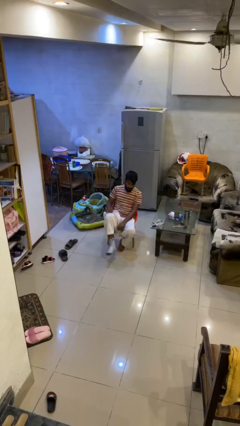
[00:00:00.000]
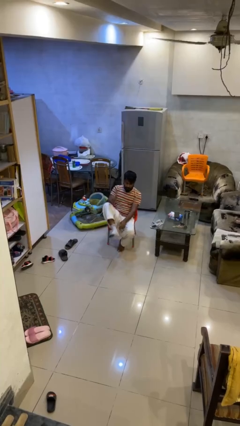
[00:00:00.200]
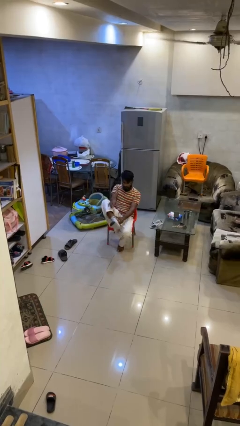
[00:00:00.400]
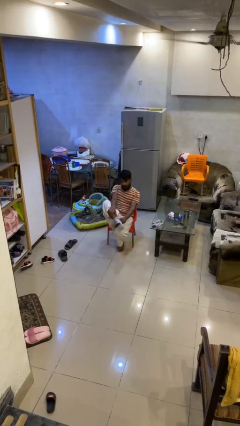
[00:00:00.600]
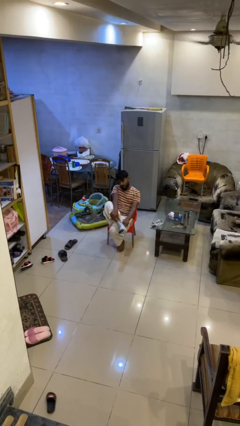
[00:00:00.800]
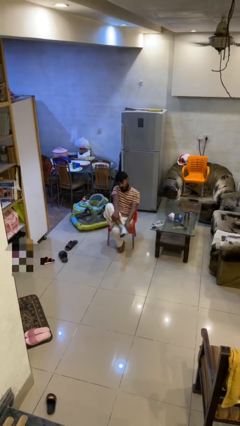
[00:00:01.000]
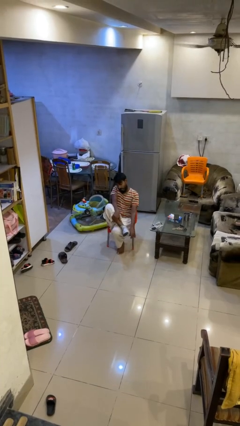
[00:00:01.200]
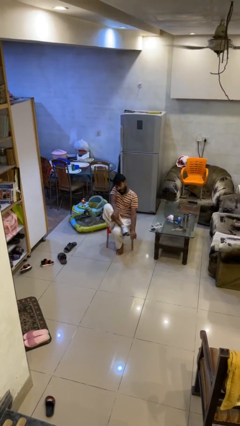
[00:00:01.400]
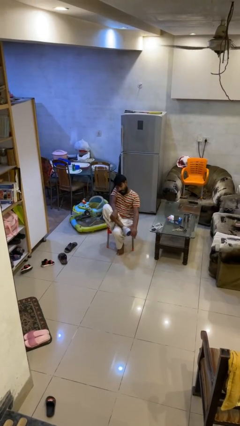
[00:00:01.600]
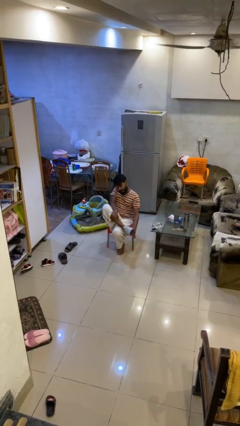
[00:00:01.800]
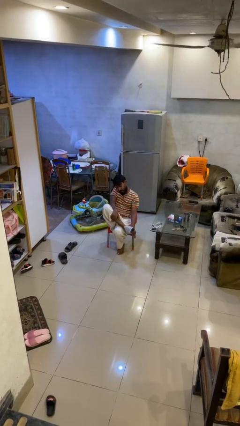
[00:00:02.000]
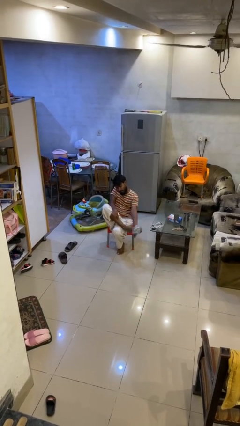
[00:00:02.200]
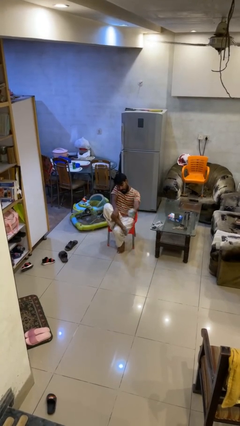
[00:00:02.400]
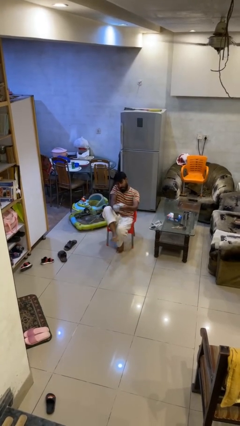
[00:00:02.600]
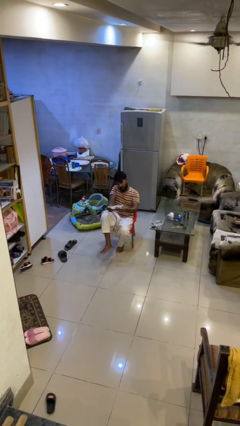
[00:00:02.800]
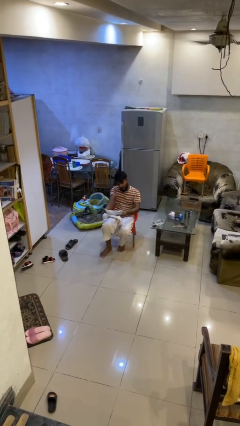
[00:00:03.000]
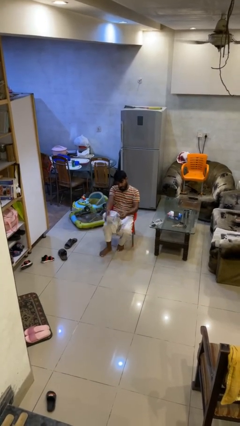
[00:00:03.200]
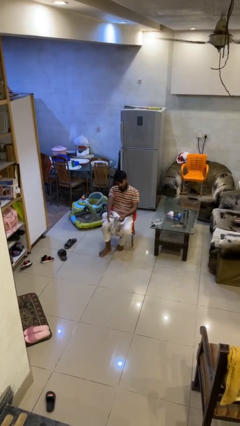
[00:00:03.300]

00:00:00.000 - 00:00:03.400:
person takes off socks

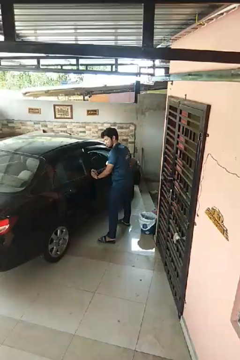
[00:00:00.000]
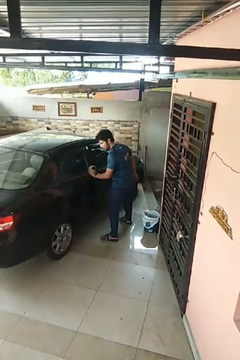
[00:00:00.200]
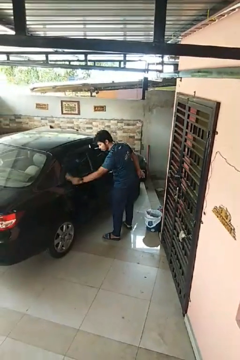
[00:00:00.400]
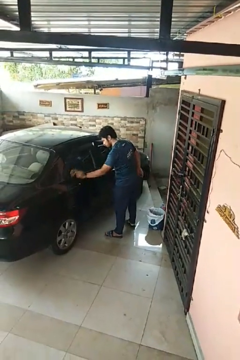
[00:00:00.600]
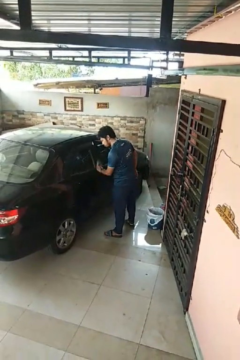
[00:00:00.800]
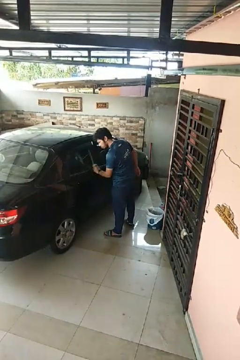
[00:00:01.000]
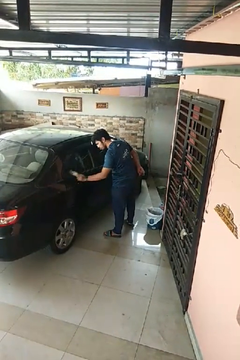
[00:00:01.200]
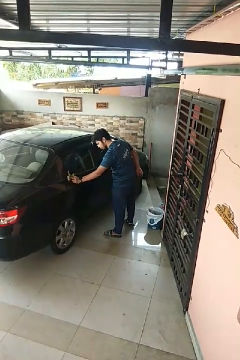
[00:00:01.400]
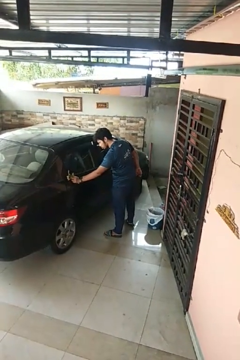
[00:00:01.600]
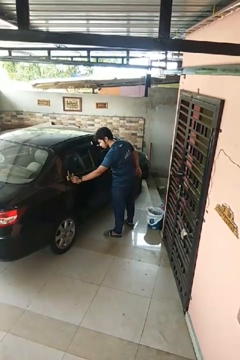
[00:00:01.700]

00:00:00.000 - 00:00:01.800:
person polishes car with rag

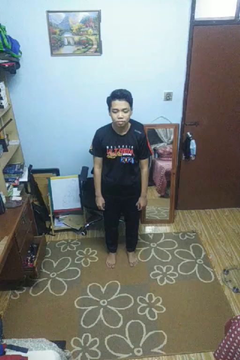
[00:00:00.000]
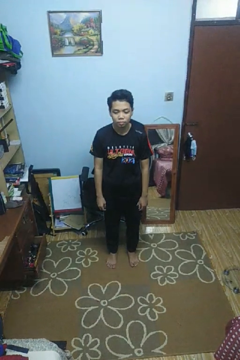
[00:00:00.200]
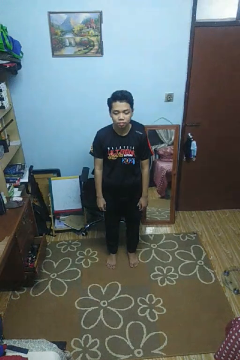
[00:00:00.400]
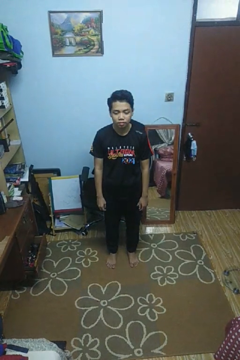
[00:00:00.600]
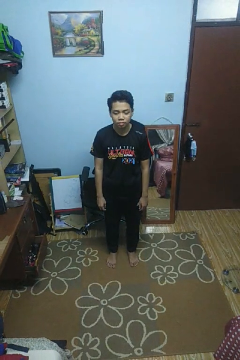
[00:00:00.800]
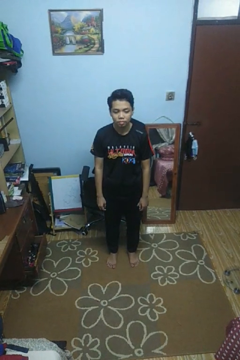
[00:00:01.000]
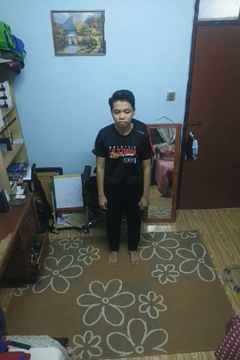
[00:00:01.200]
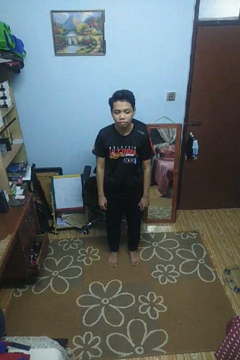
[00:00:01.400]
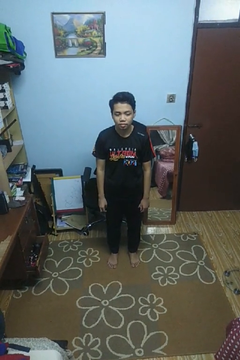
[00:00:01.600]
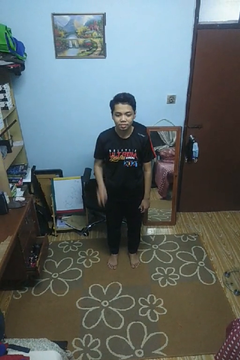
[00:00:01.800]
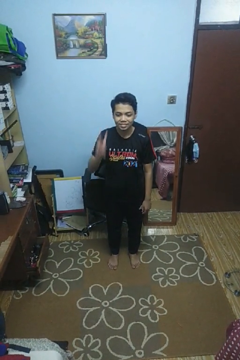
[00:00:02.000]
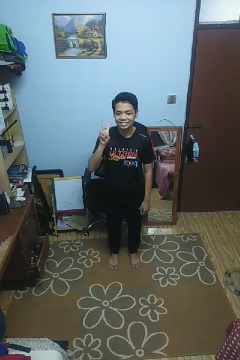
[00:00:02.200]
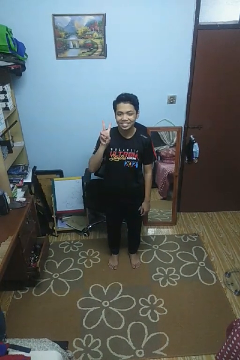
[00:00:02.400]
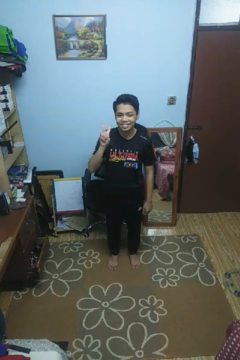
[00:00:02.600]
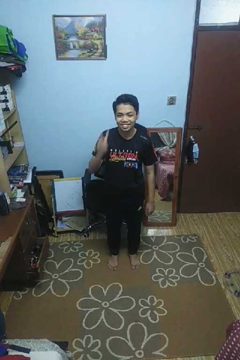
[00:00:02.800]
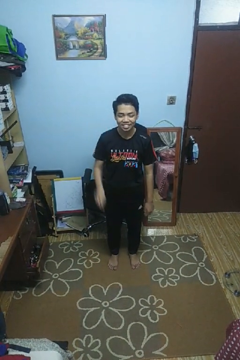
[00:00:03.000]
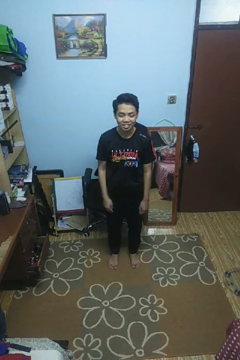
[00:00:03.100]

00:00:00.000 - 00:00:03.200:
person gestures peace

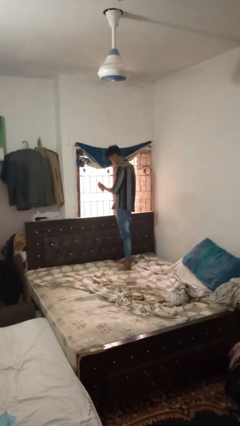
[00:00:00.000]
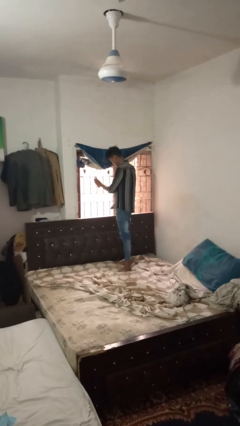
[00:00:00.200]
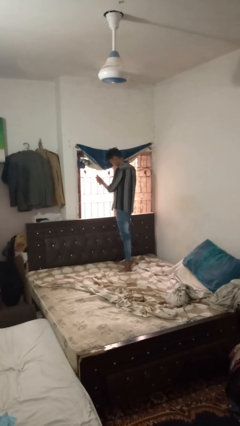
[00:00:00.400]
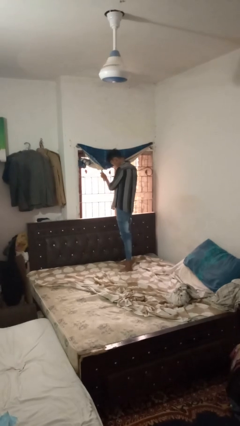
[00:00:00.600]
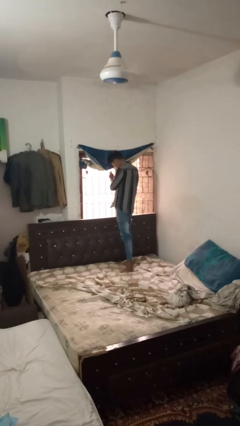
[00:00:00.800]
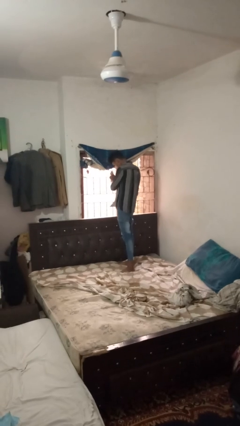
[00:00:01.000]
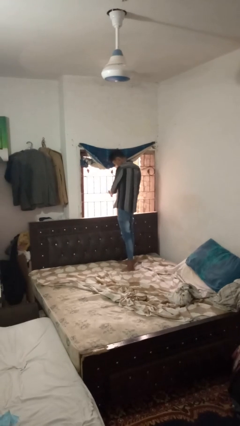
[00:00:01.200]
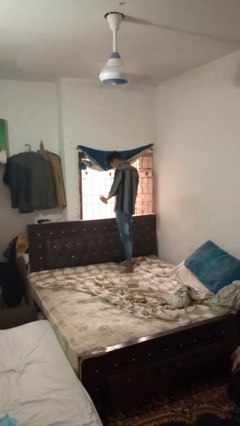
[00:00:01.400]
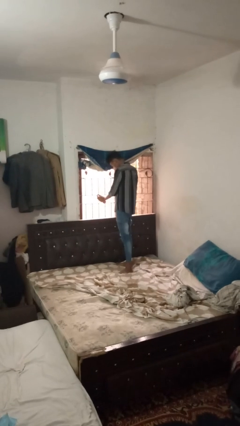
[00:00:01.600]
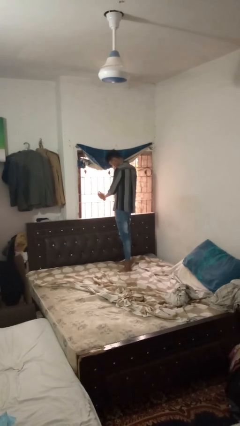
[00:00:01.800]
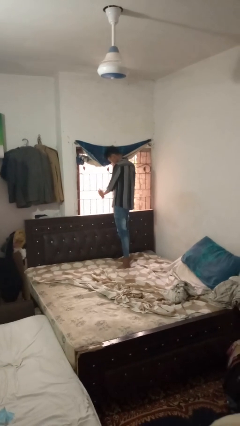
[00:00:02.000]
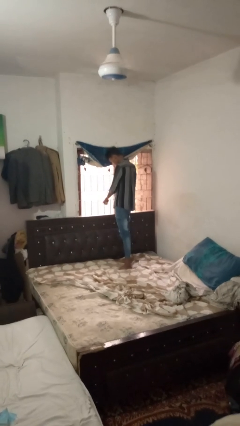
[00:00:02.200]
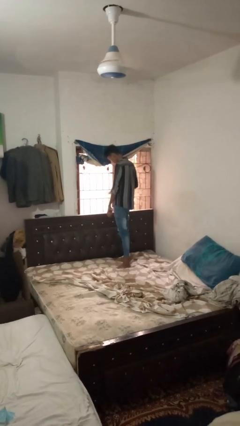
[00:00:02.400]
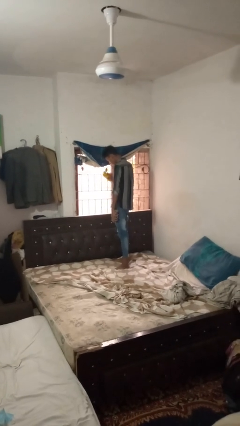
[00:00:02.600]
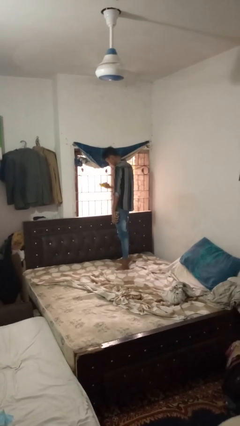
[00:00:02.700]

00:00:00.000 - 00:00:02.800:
person sprays from bottle

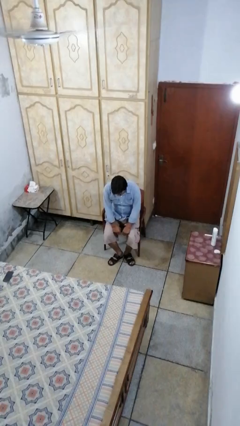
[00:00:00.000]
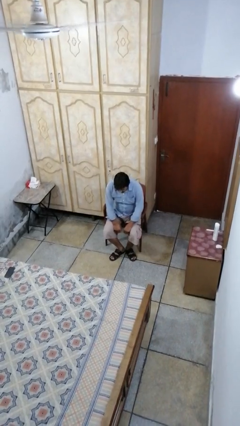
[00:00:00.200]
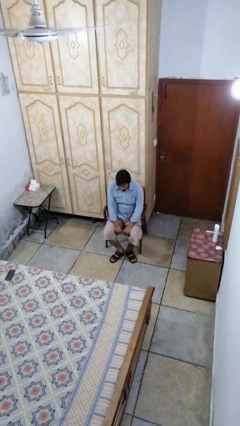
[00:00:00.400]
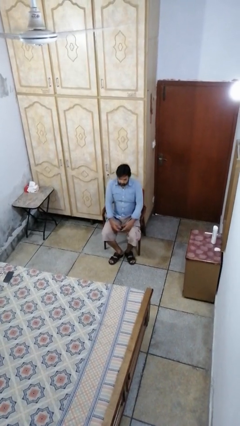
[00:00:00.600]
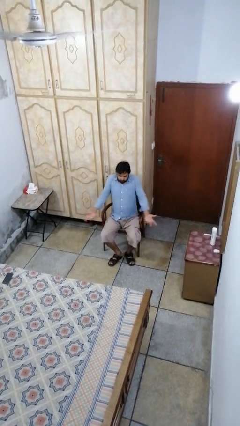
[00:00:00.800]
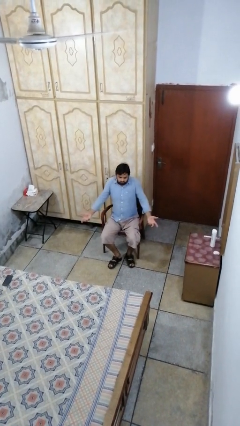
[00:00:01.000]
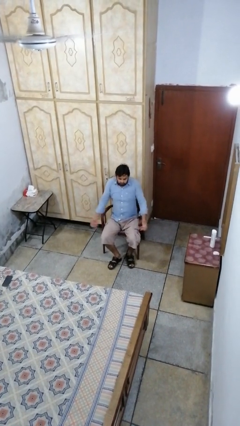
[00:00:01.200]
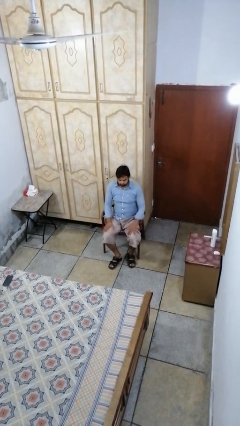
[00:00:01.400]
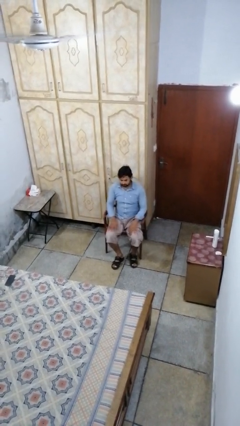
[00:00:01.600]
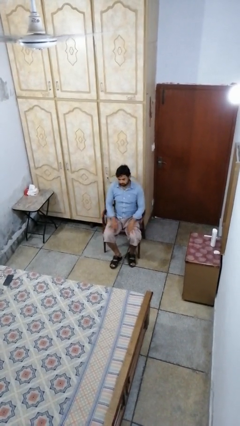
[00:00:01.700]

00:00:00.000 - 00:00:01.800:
person shrugs

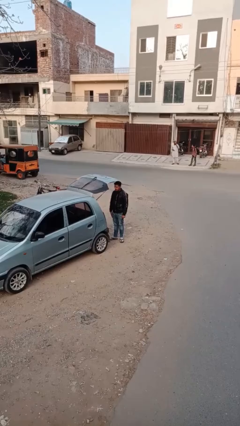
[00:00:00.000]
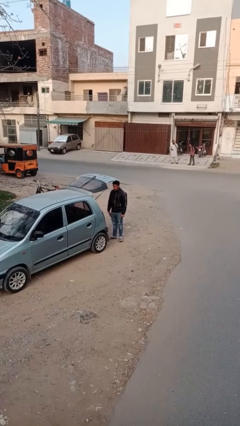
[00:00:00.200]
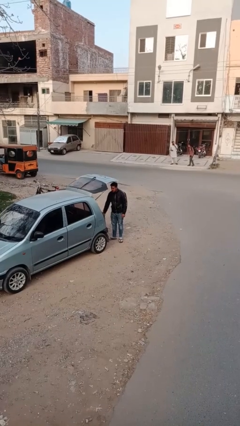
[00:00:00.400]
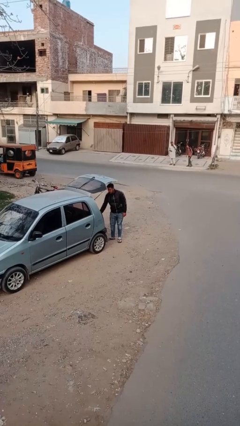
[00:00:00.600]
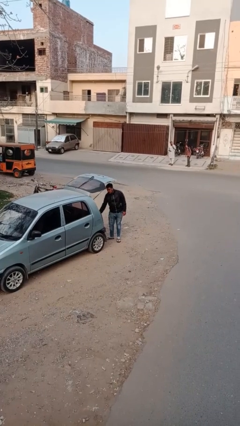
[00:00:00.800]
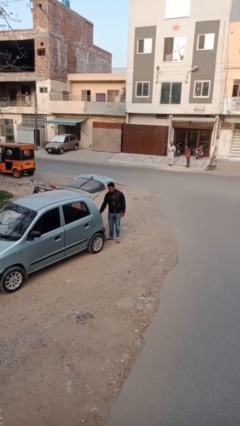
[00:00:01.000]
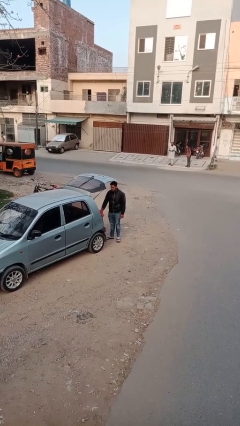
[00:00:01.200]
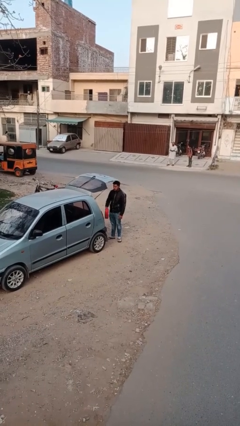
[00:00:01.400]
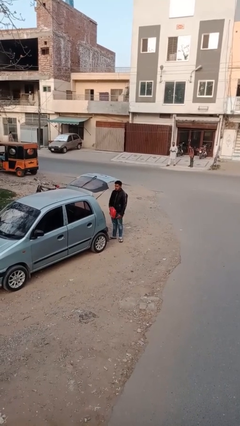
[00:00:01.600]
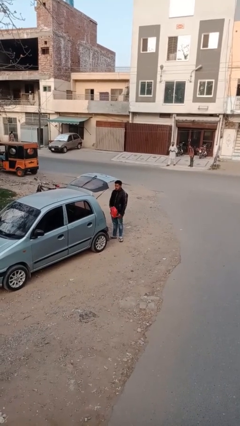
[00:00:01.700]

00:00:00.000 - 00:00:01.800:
person unloads car

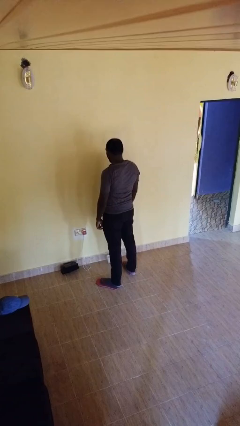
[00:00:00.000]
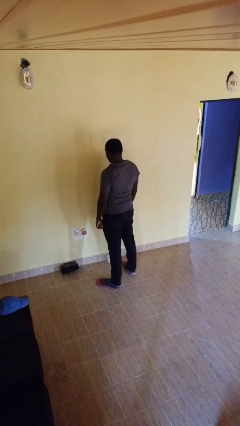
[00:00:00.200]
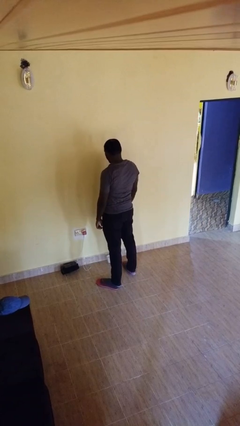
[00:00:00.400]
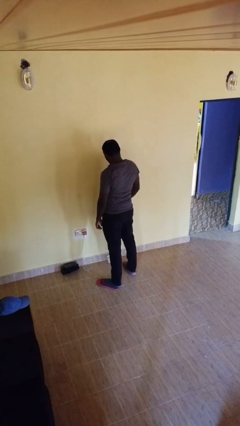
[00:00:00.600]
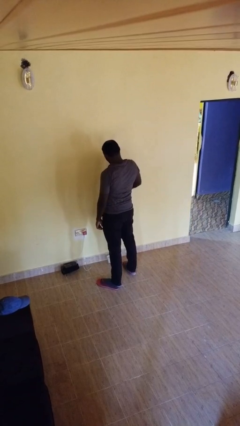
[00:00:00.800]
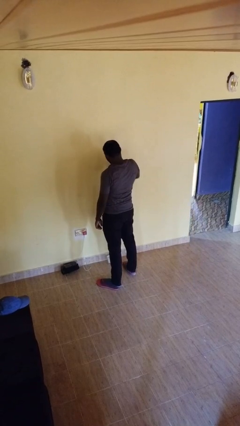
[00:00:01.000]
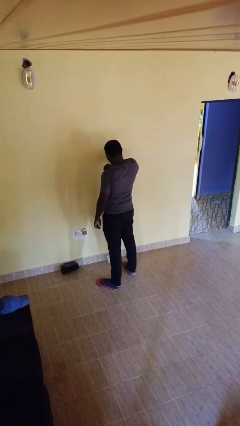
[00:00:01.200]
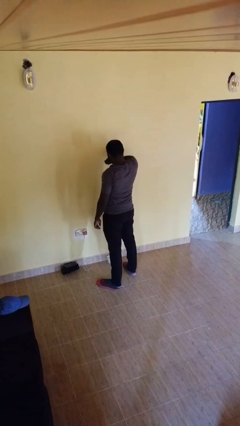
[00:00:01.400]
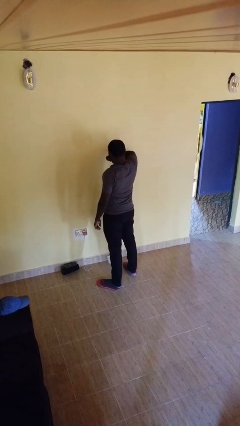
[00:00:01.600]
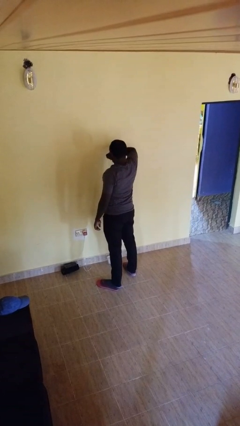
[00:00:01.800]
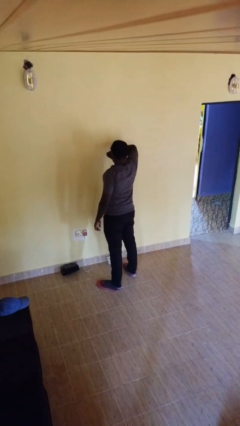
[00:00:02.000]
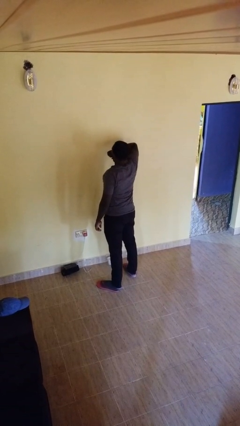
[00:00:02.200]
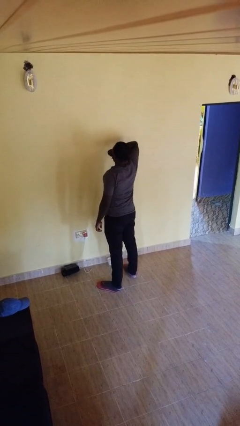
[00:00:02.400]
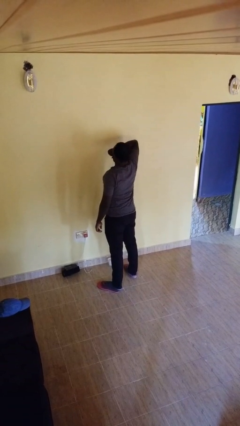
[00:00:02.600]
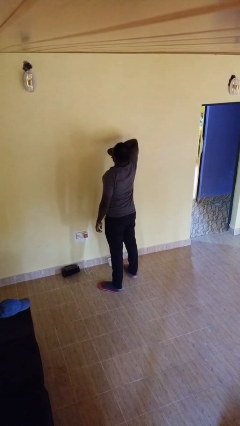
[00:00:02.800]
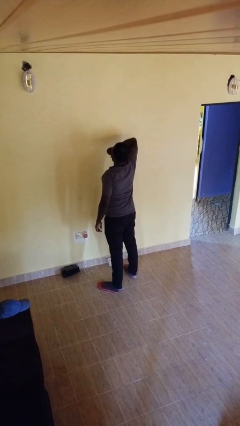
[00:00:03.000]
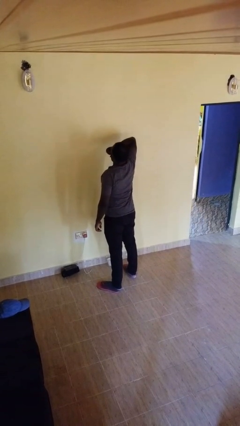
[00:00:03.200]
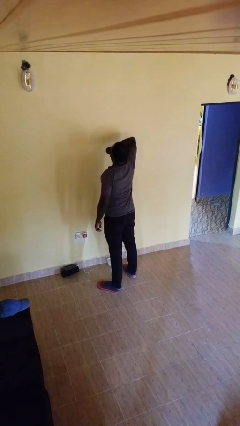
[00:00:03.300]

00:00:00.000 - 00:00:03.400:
person yawns
